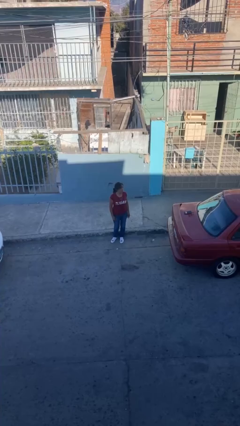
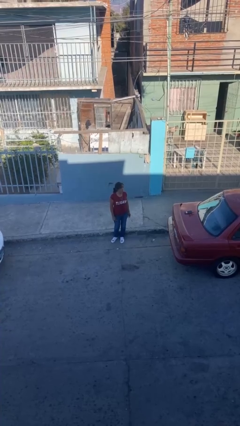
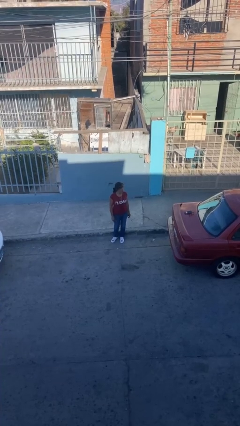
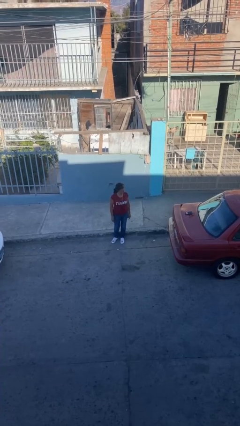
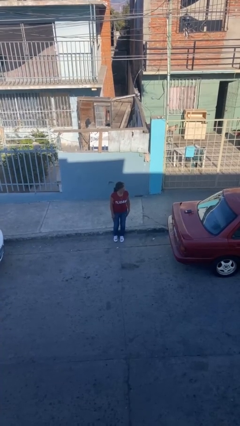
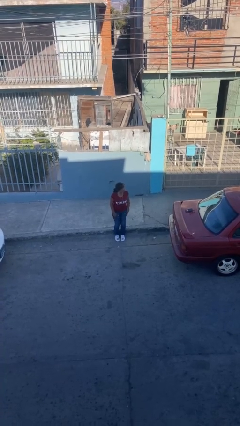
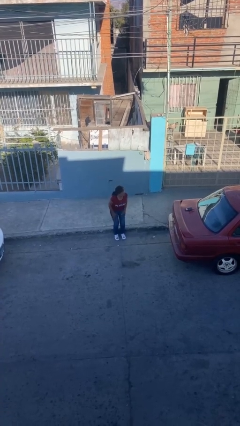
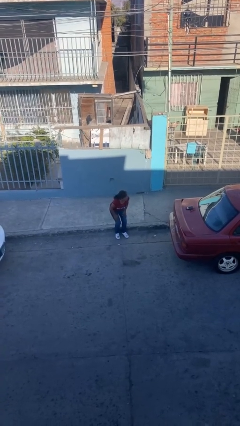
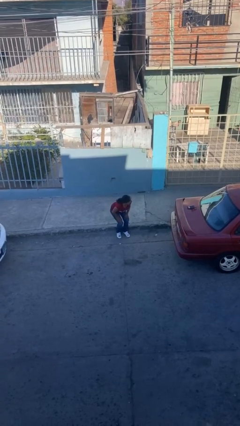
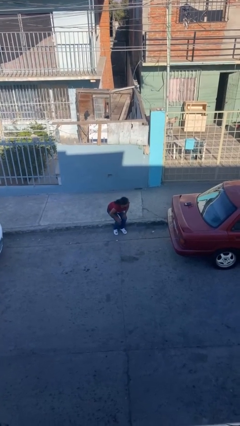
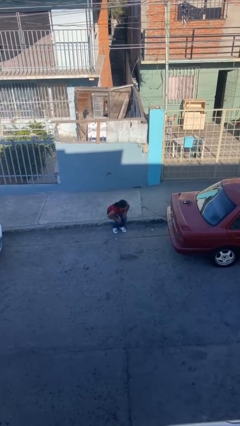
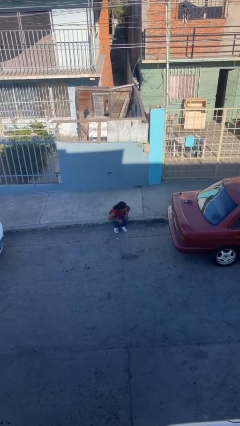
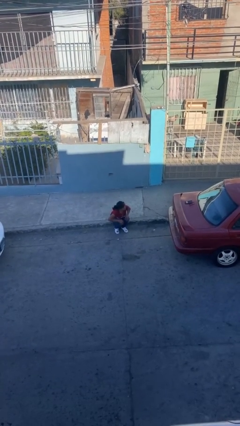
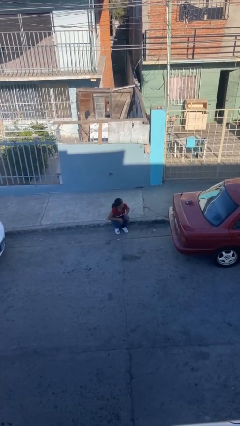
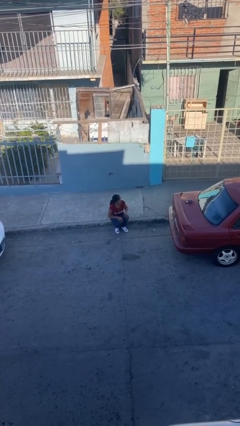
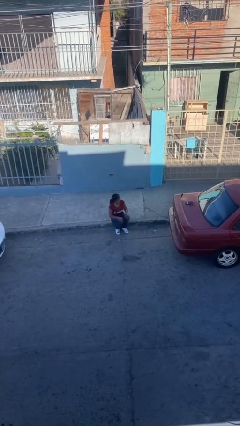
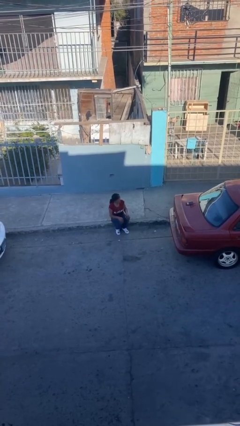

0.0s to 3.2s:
person sits down

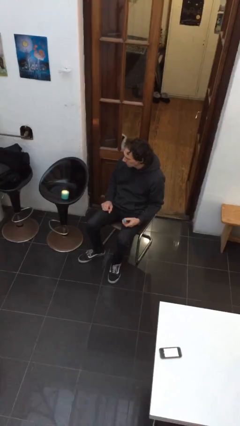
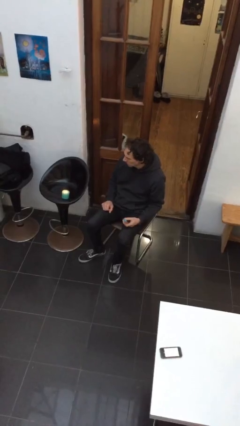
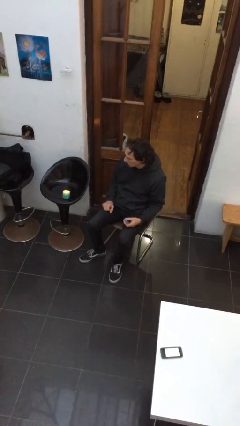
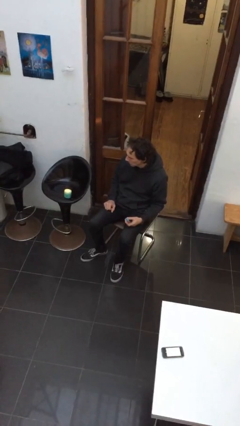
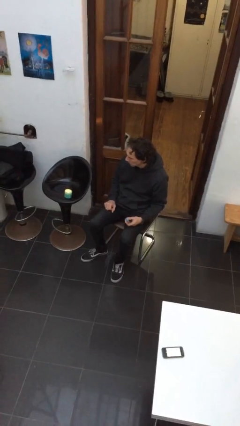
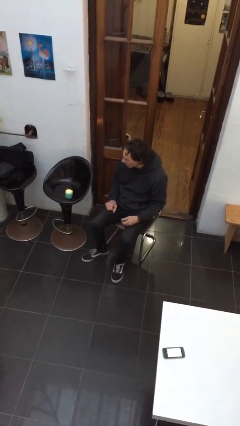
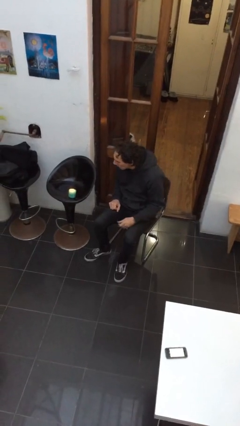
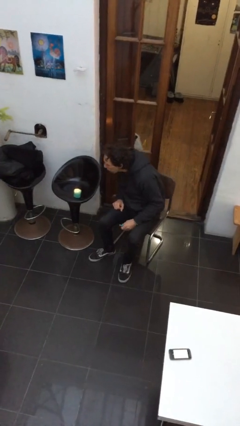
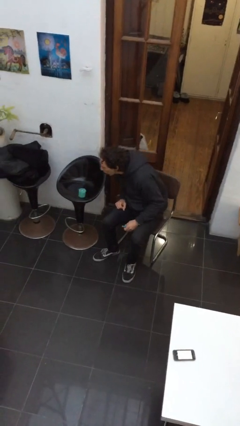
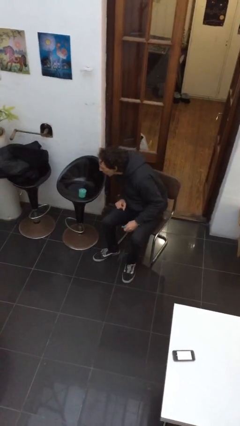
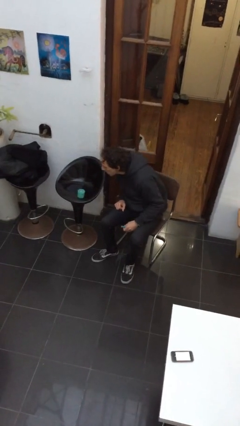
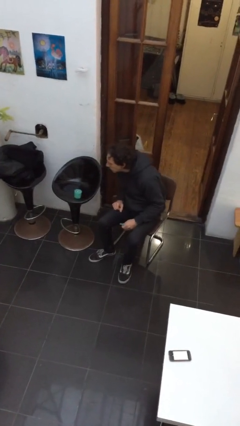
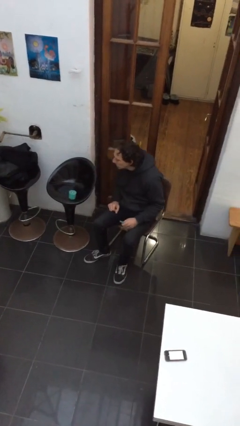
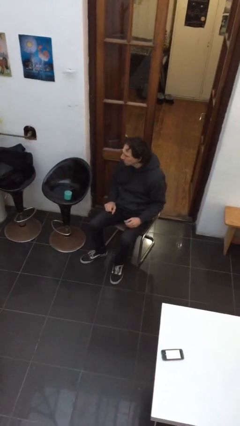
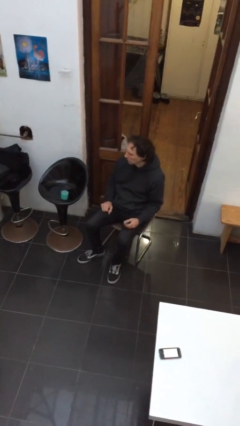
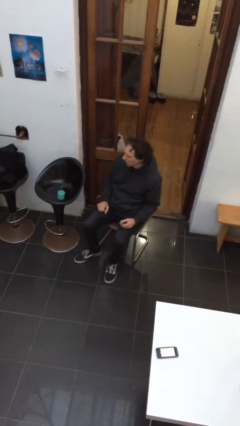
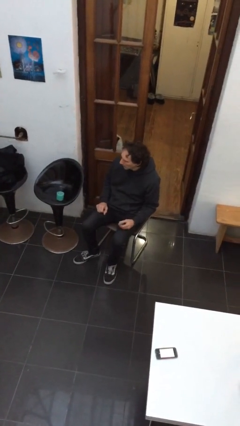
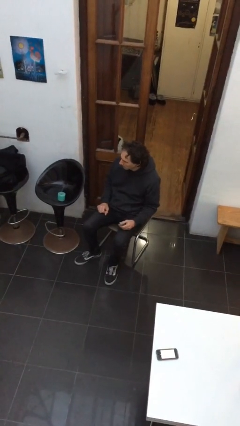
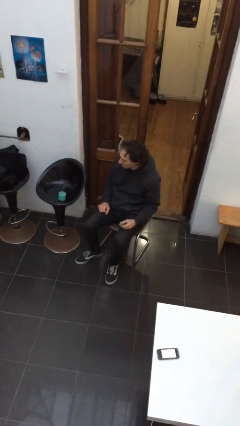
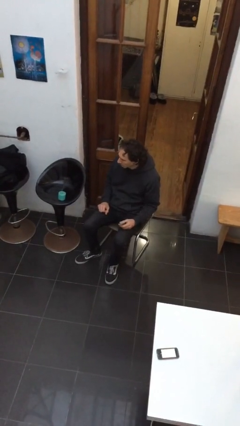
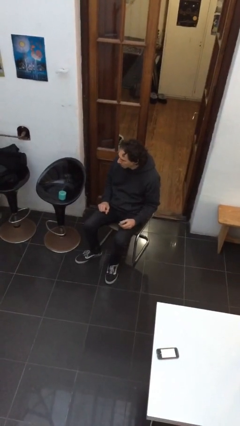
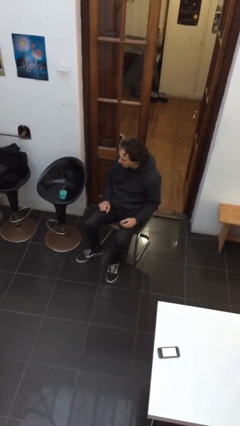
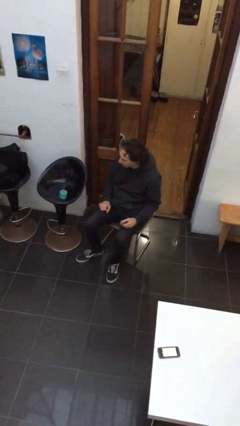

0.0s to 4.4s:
person extinguishes candle

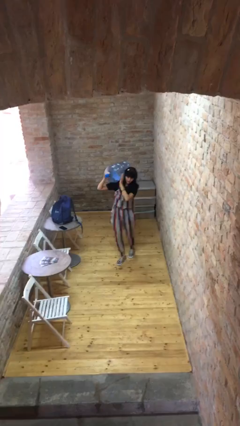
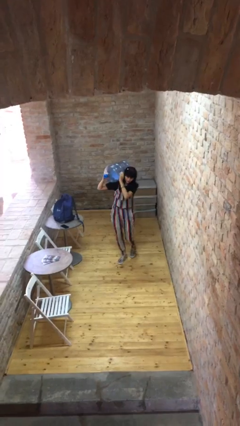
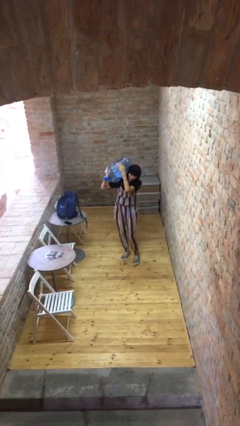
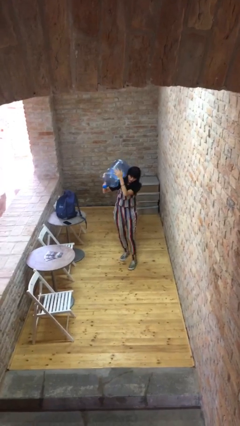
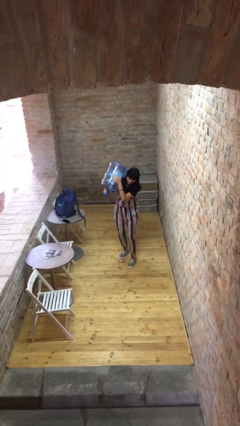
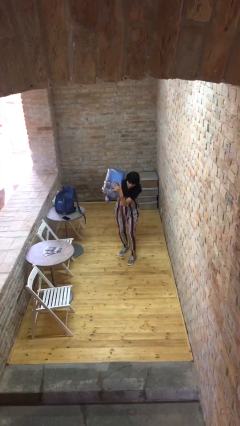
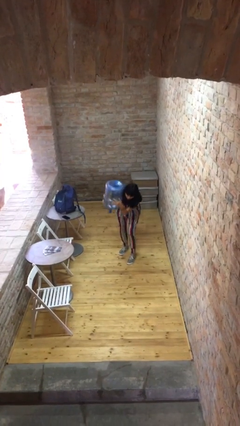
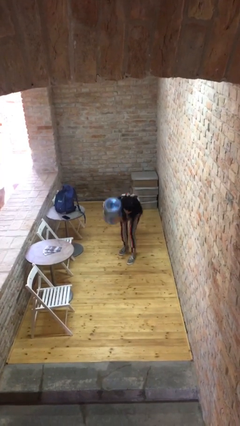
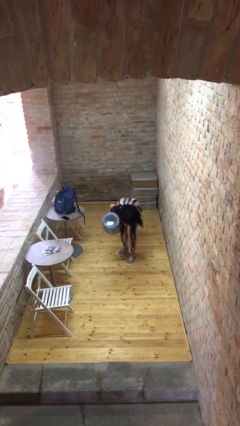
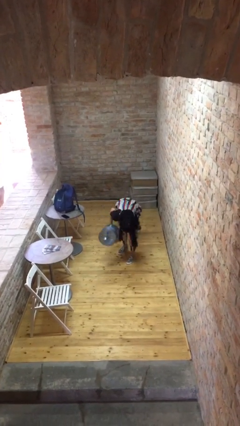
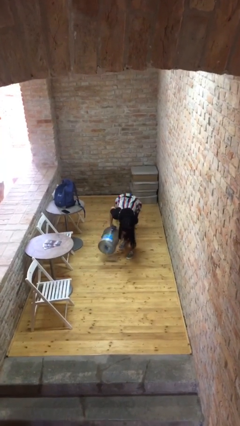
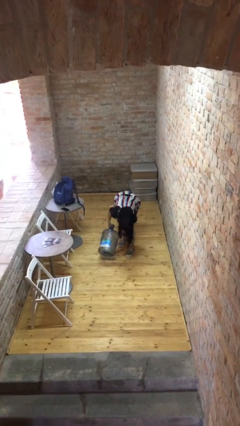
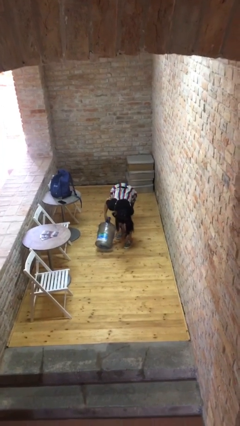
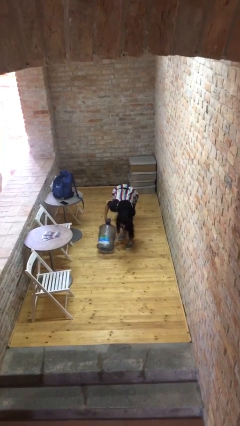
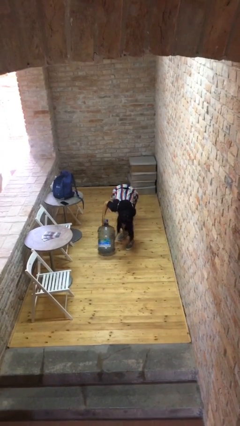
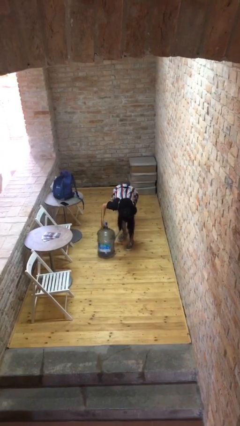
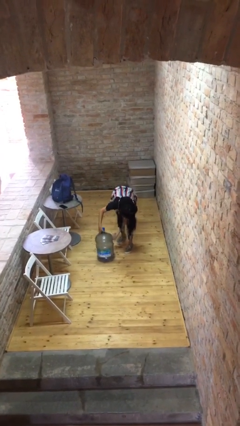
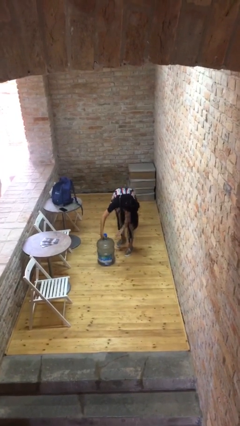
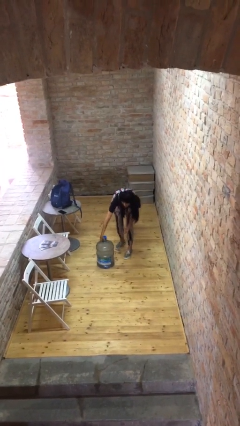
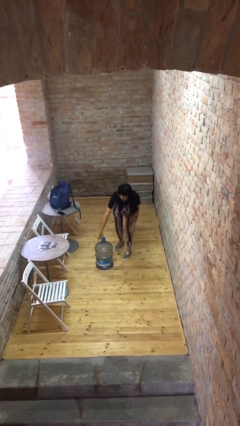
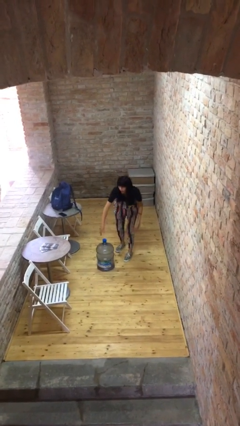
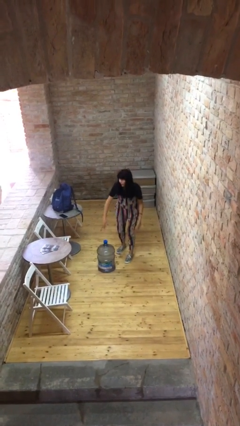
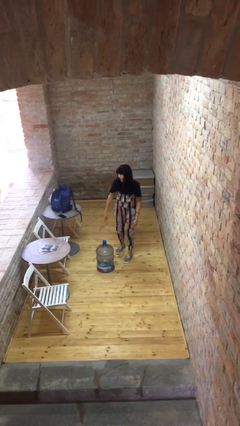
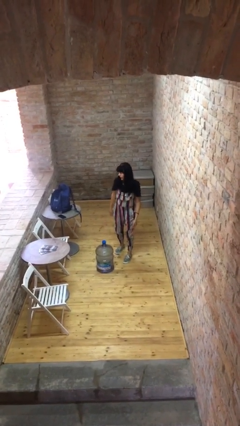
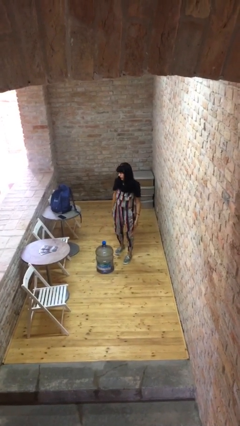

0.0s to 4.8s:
person puts down object on floor

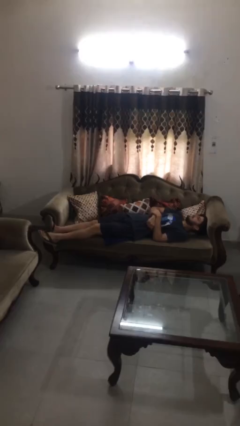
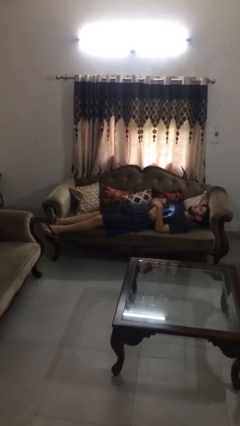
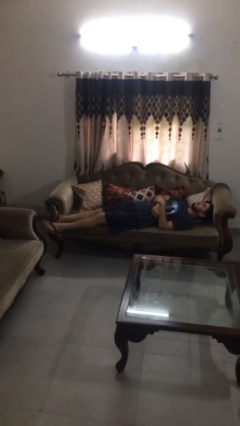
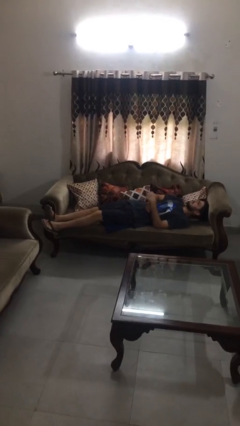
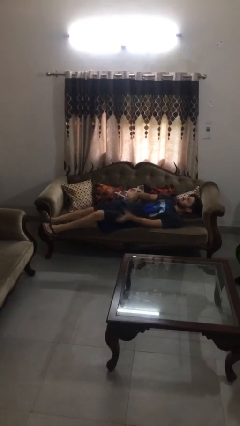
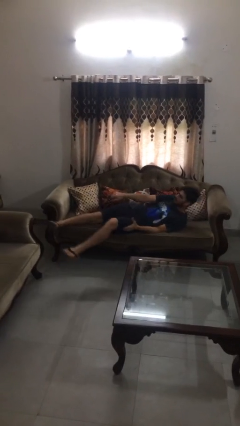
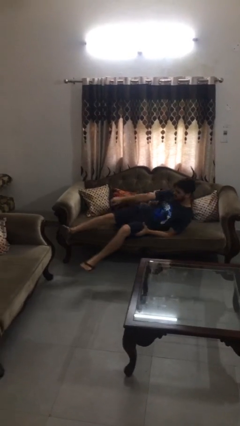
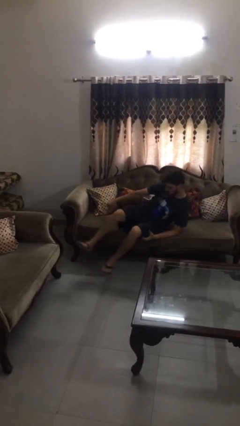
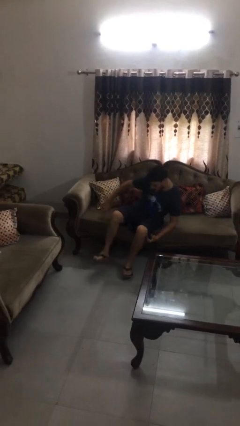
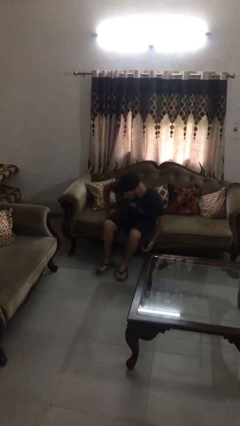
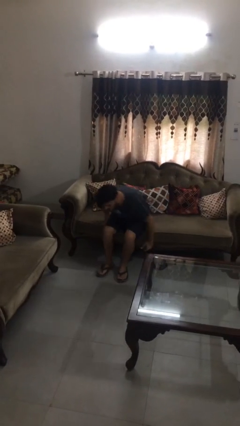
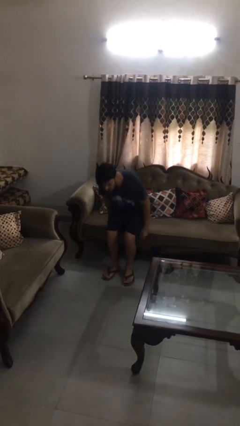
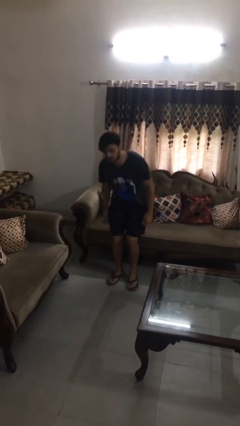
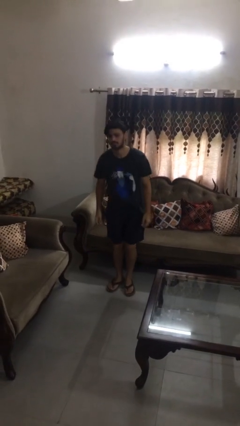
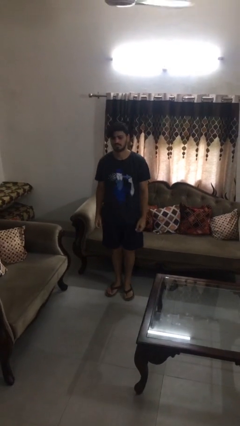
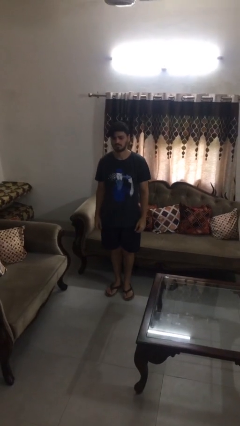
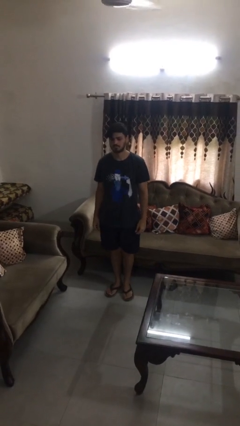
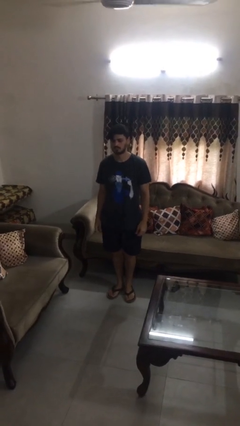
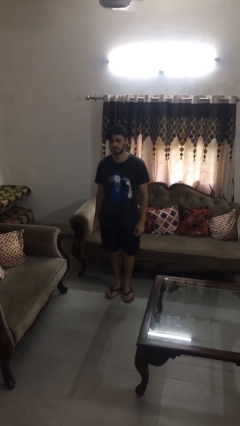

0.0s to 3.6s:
person stands up

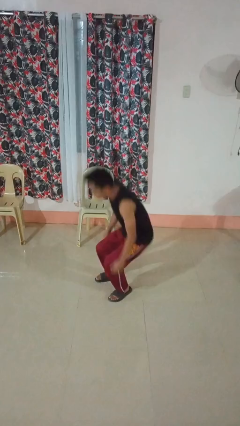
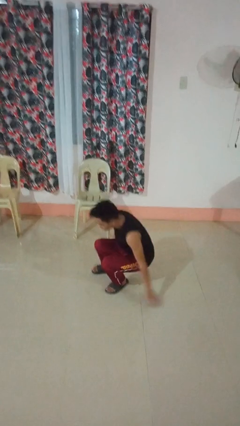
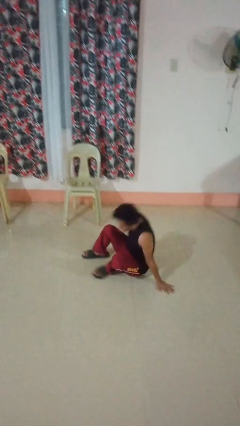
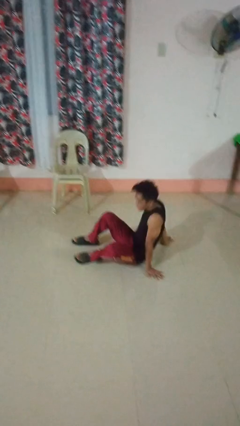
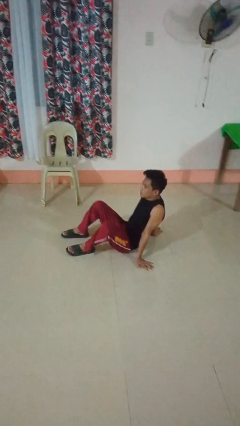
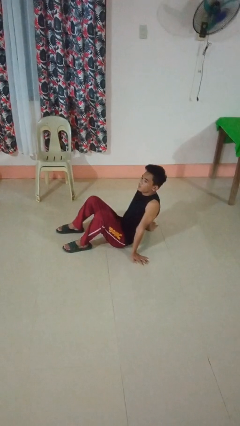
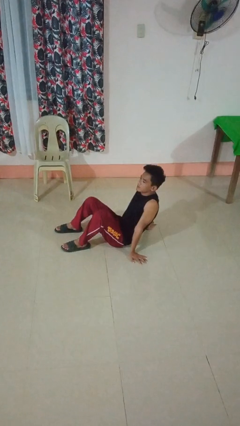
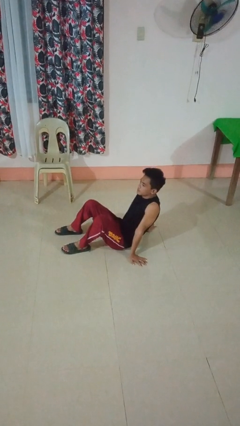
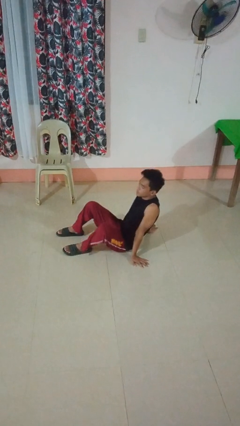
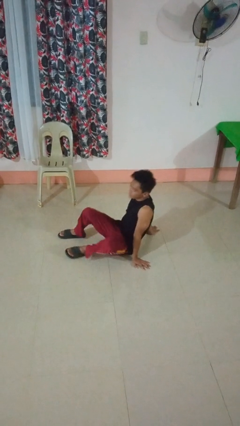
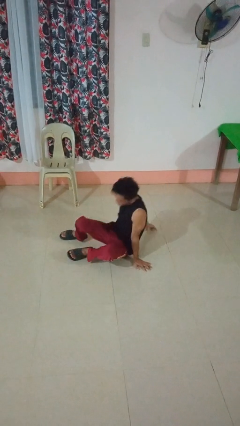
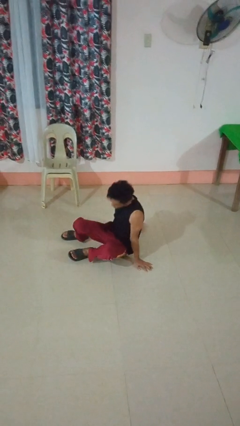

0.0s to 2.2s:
person falls while standing
